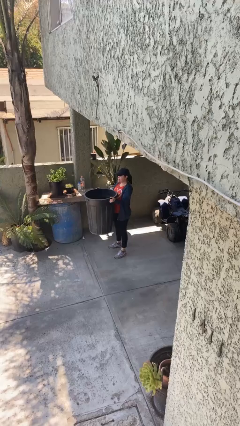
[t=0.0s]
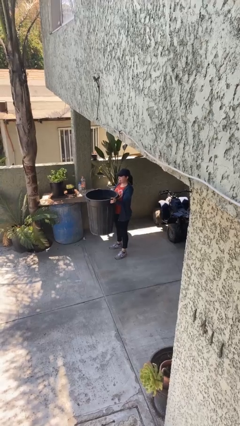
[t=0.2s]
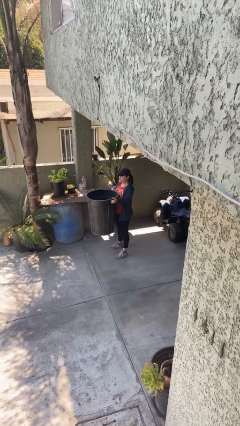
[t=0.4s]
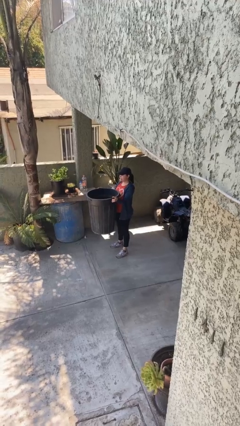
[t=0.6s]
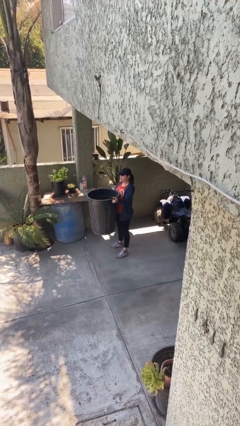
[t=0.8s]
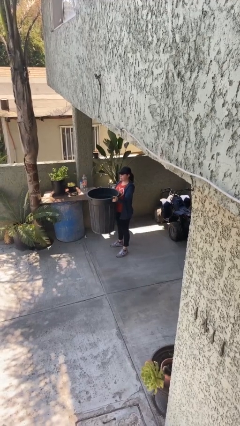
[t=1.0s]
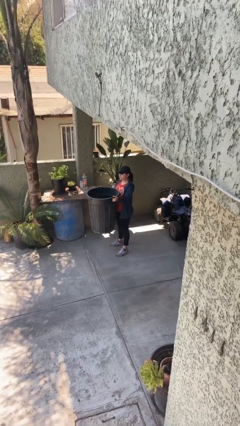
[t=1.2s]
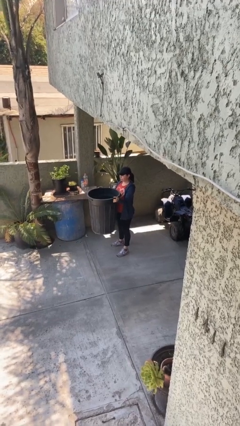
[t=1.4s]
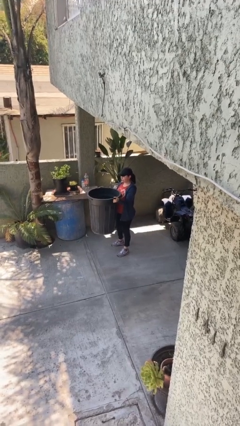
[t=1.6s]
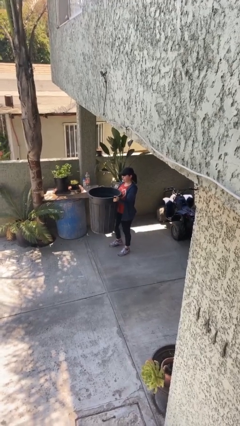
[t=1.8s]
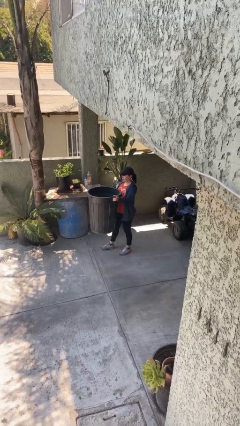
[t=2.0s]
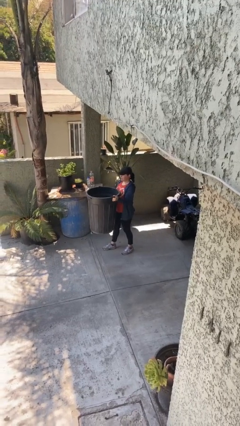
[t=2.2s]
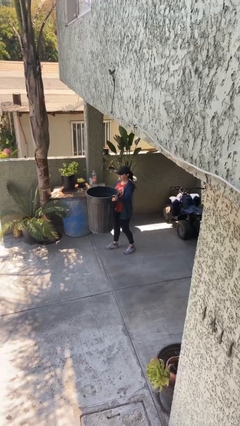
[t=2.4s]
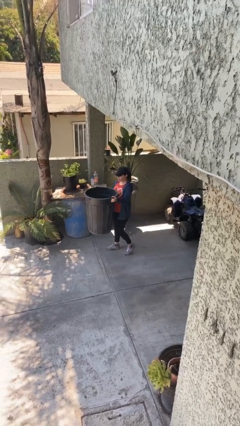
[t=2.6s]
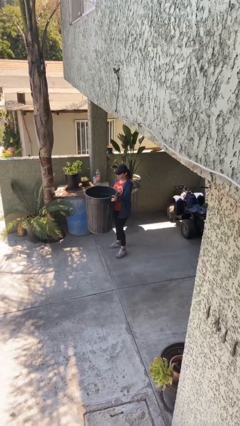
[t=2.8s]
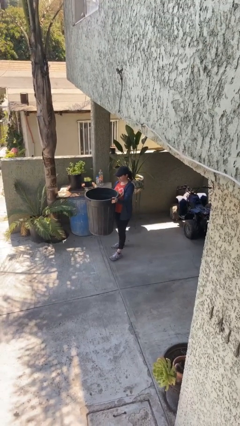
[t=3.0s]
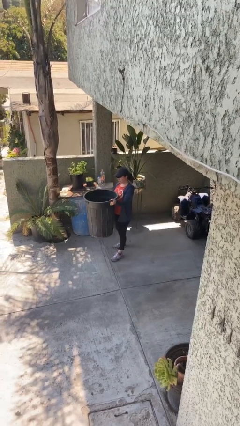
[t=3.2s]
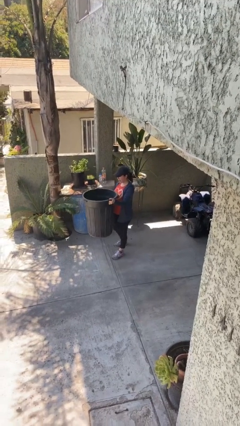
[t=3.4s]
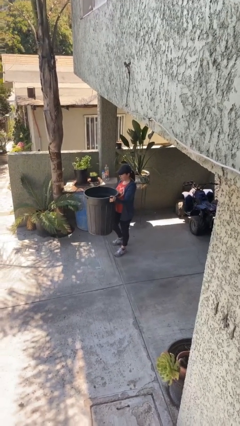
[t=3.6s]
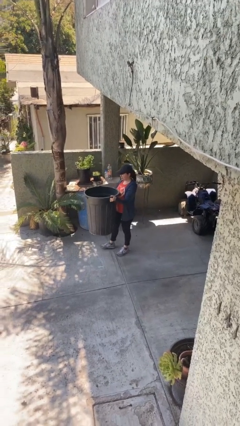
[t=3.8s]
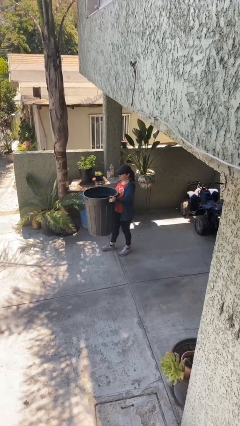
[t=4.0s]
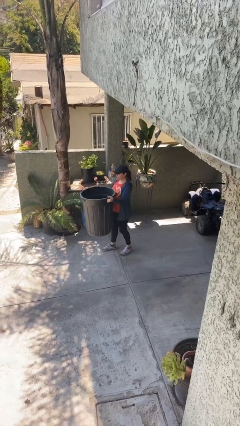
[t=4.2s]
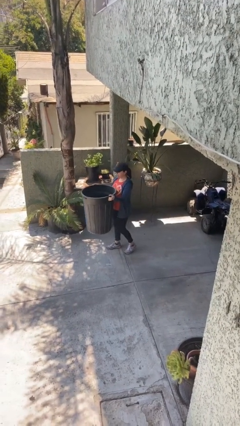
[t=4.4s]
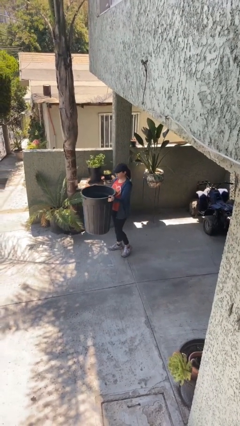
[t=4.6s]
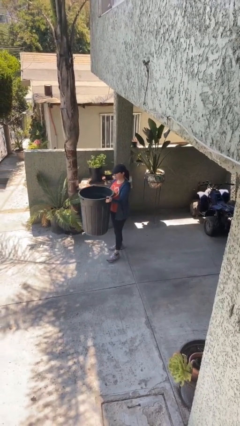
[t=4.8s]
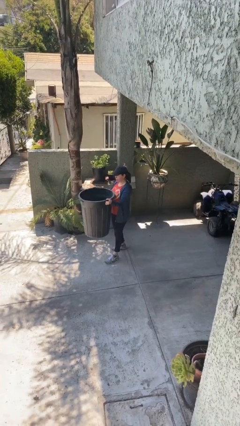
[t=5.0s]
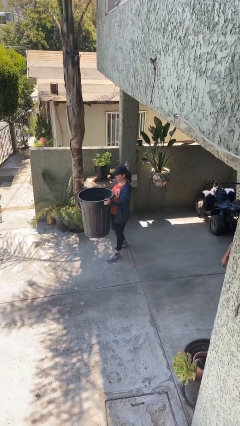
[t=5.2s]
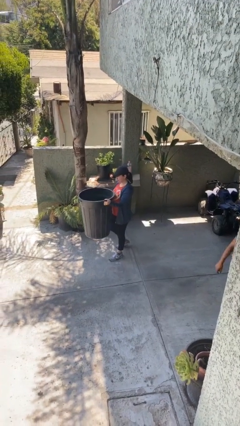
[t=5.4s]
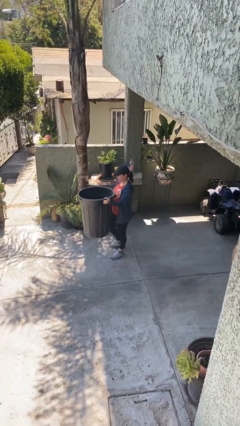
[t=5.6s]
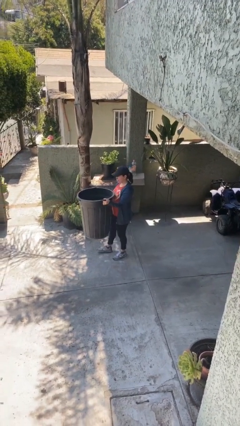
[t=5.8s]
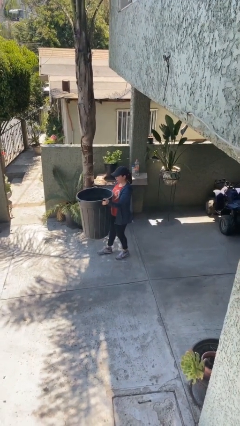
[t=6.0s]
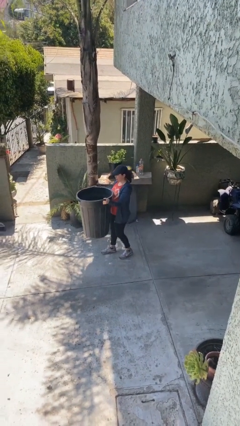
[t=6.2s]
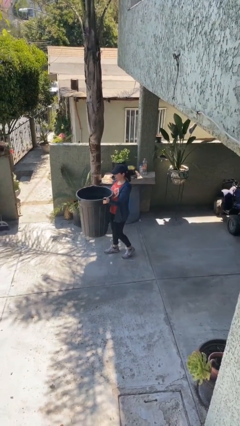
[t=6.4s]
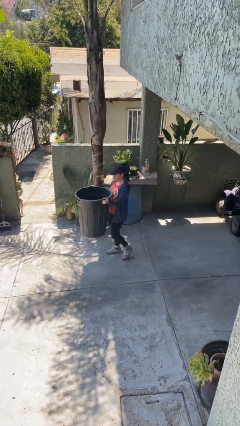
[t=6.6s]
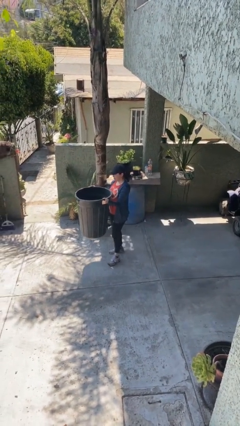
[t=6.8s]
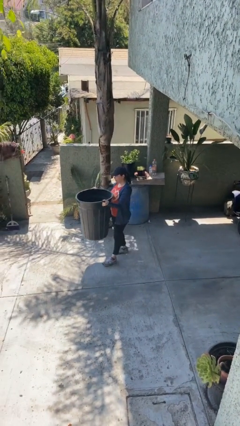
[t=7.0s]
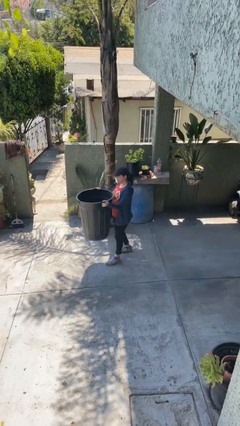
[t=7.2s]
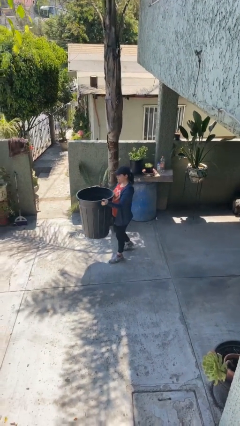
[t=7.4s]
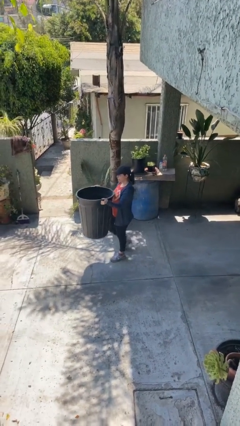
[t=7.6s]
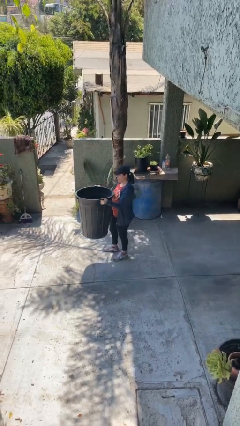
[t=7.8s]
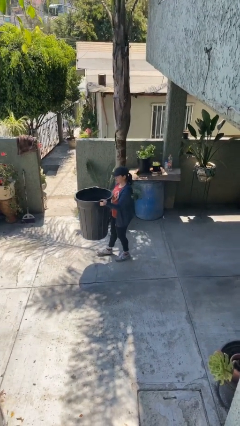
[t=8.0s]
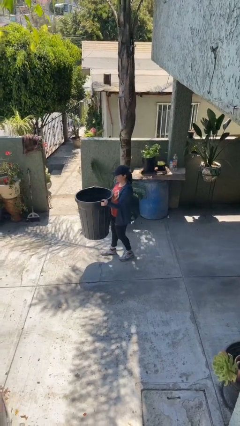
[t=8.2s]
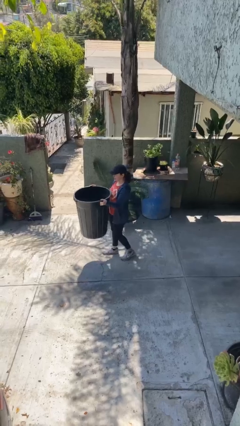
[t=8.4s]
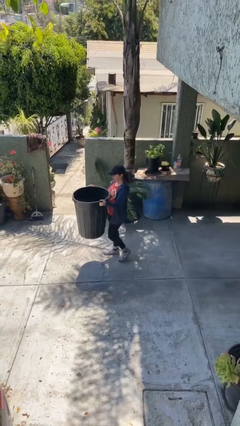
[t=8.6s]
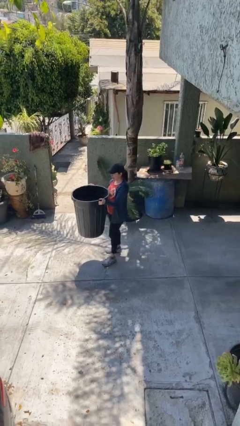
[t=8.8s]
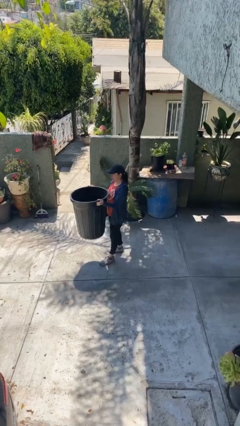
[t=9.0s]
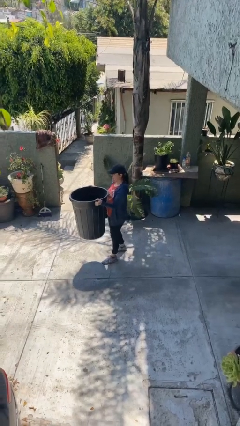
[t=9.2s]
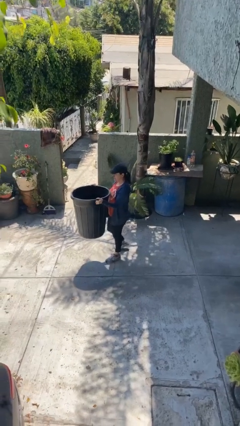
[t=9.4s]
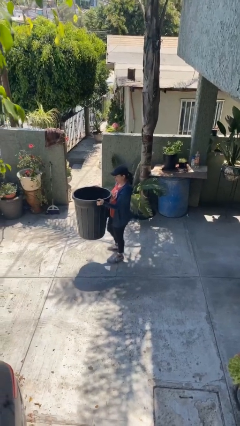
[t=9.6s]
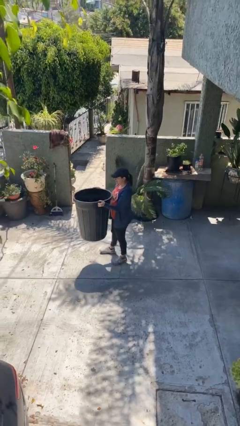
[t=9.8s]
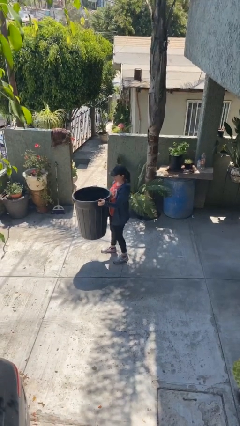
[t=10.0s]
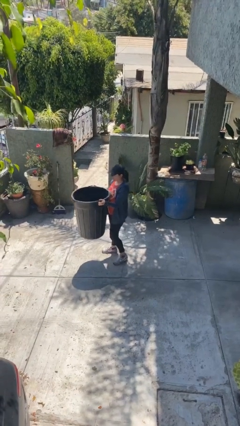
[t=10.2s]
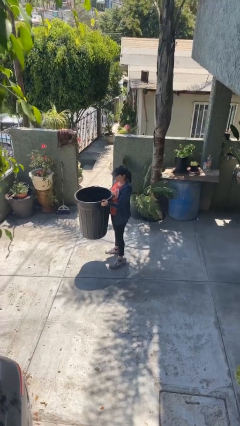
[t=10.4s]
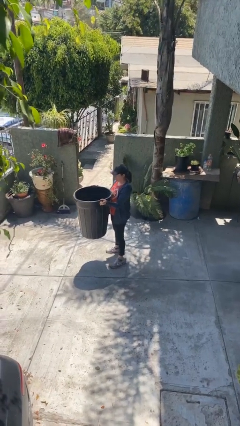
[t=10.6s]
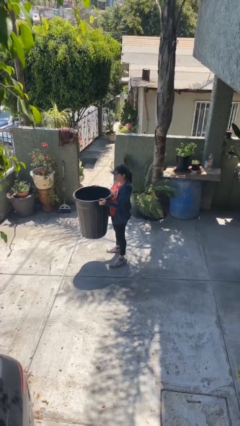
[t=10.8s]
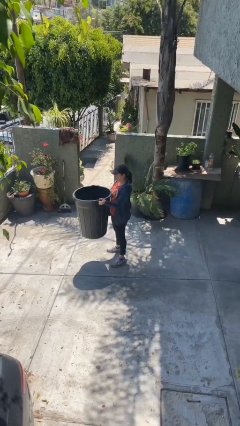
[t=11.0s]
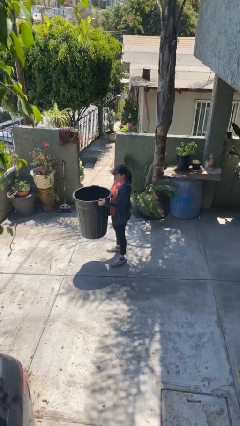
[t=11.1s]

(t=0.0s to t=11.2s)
person carries heavy object

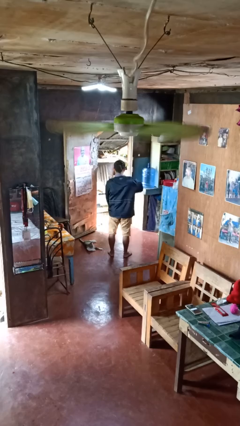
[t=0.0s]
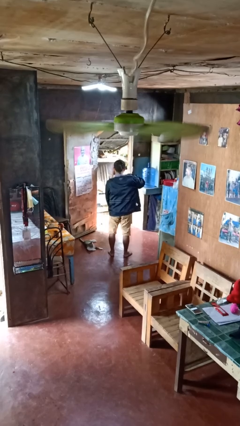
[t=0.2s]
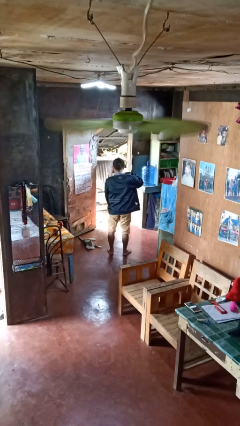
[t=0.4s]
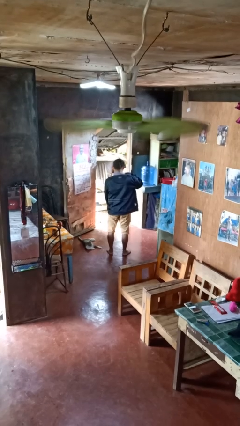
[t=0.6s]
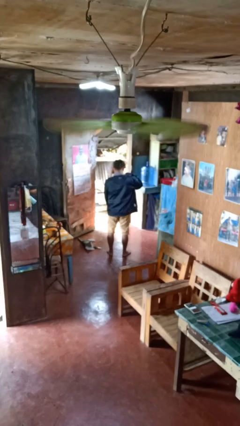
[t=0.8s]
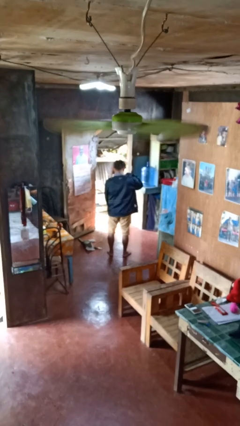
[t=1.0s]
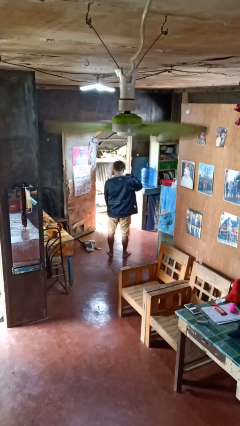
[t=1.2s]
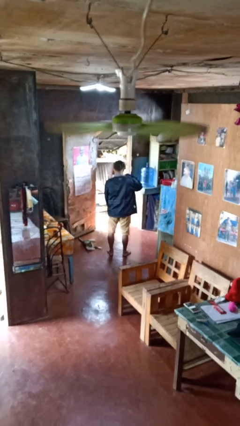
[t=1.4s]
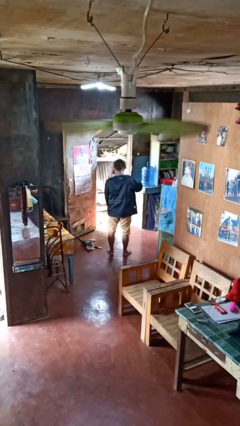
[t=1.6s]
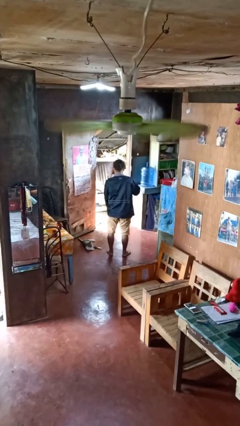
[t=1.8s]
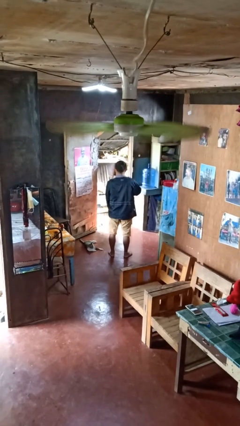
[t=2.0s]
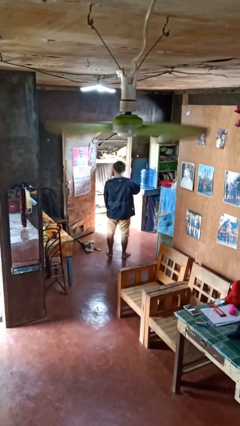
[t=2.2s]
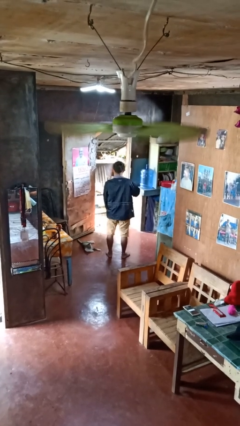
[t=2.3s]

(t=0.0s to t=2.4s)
person zips up jacket

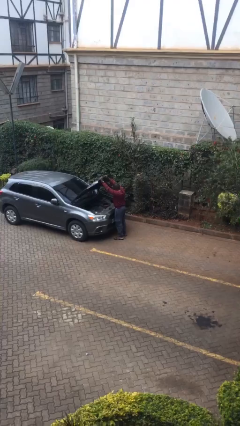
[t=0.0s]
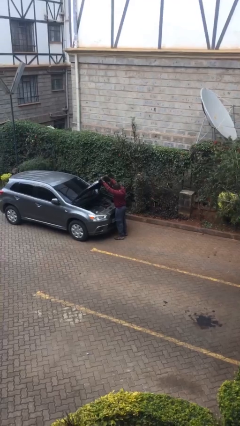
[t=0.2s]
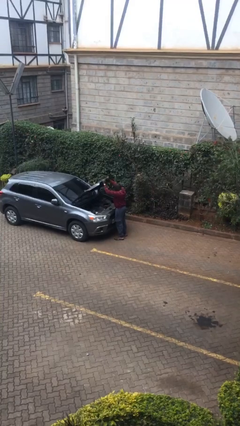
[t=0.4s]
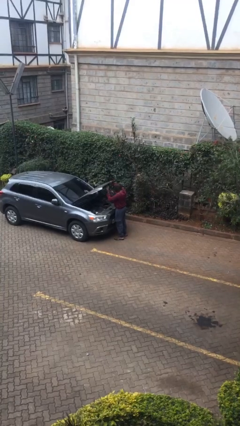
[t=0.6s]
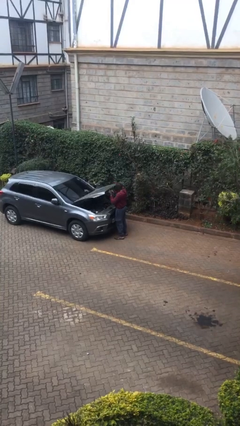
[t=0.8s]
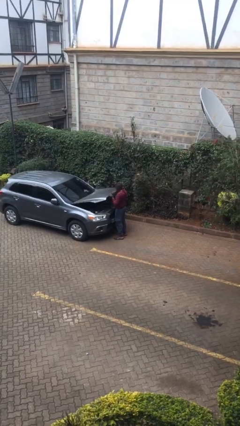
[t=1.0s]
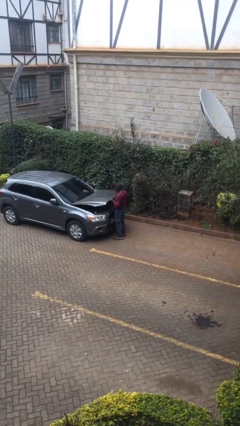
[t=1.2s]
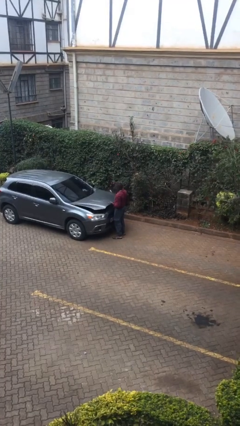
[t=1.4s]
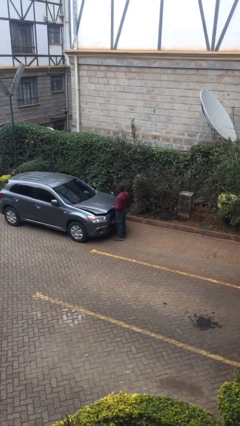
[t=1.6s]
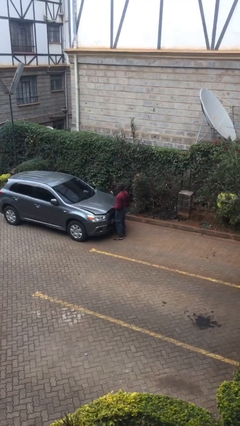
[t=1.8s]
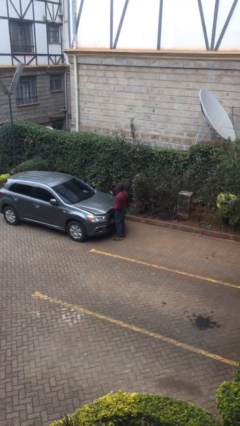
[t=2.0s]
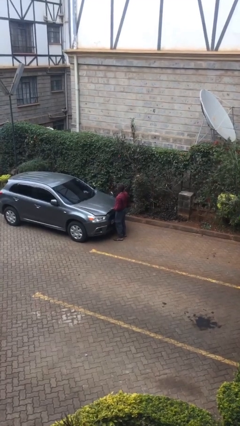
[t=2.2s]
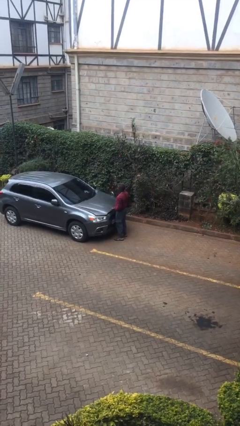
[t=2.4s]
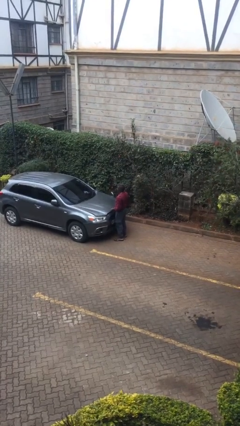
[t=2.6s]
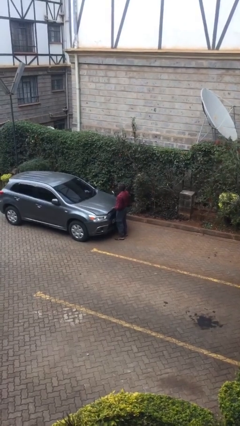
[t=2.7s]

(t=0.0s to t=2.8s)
person closes car hood

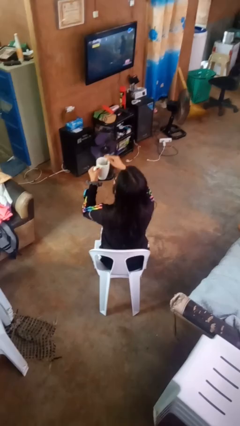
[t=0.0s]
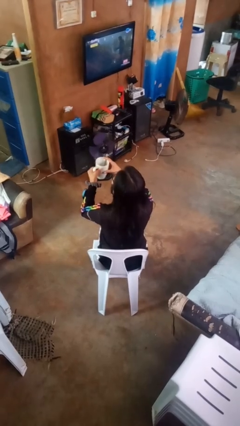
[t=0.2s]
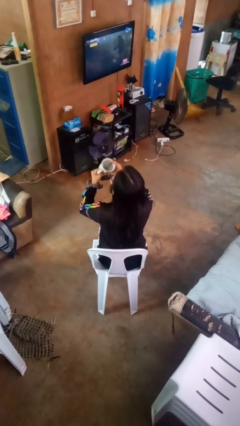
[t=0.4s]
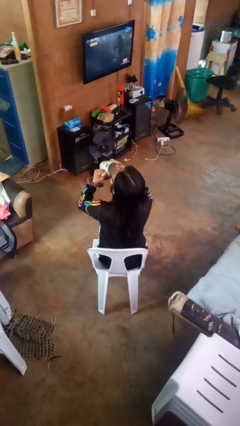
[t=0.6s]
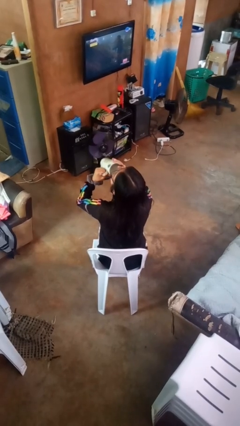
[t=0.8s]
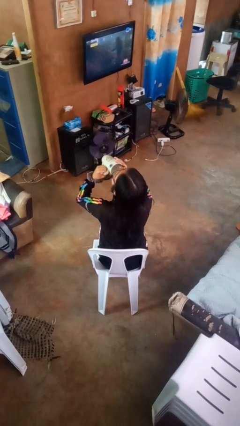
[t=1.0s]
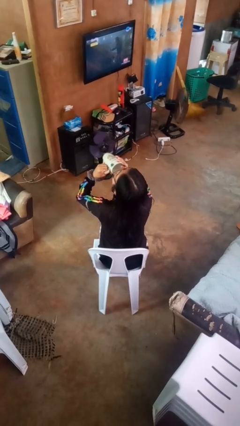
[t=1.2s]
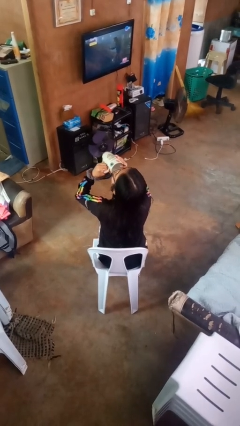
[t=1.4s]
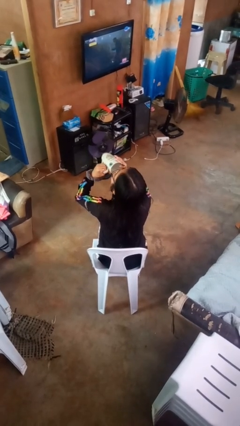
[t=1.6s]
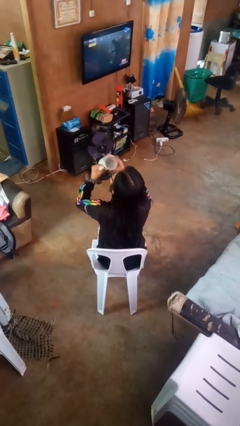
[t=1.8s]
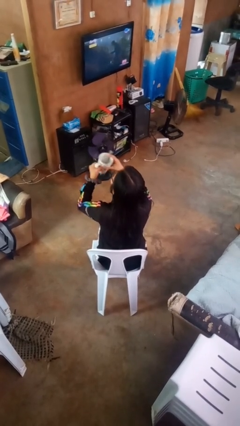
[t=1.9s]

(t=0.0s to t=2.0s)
person drinks from mug
